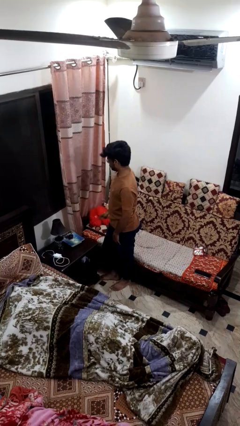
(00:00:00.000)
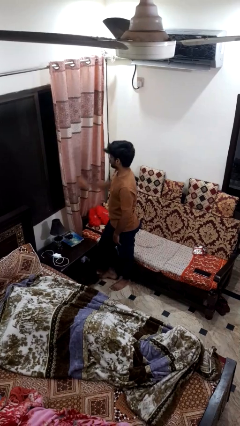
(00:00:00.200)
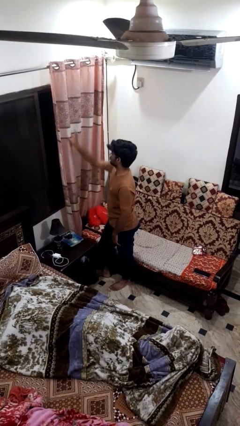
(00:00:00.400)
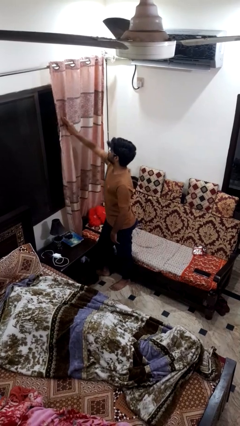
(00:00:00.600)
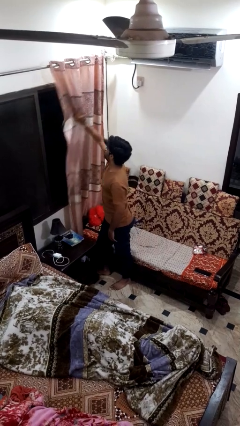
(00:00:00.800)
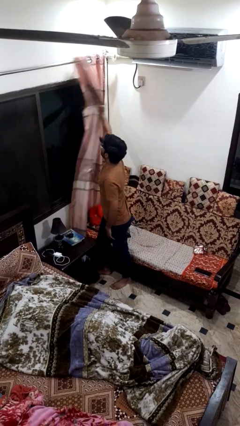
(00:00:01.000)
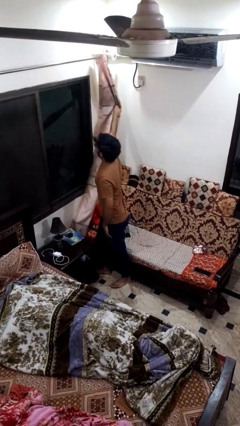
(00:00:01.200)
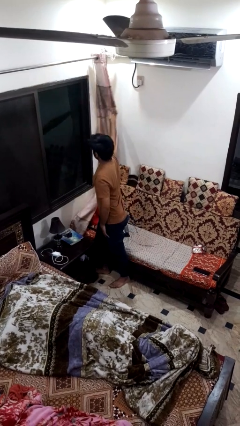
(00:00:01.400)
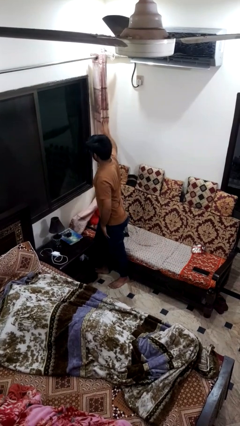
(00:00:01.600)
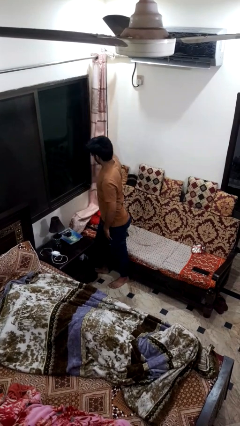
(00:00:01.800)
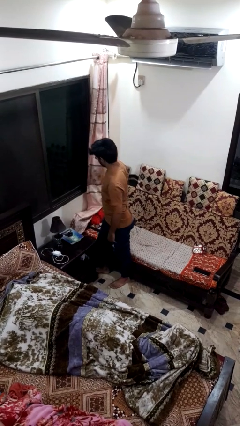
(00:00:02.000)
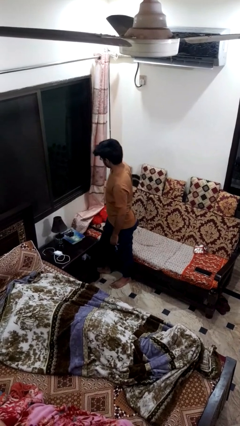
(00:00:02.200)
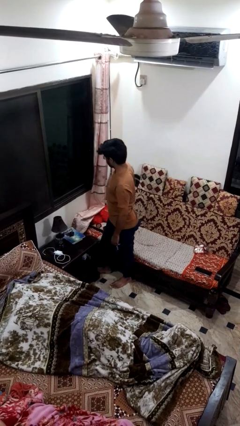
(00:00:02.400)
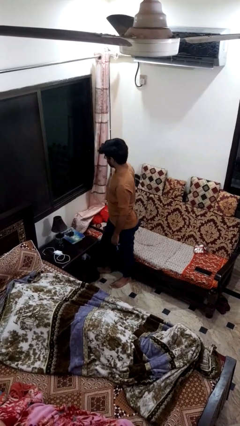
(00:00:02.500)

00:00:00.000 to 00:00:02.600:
person opens curtains

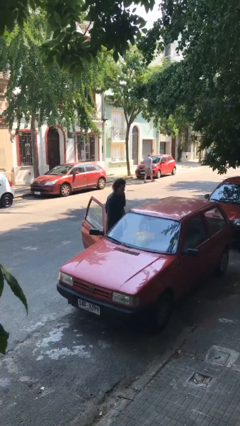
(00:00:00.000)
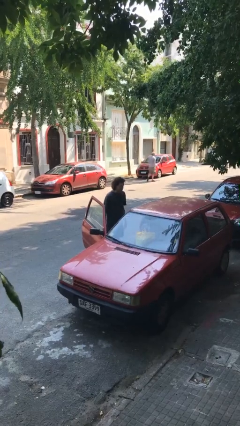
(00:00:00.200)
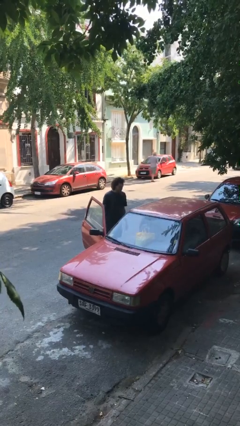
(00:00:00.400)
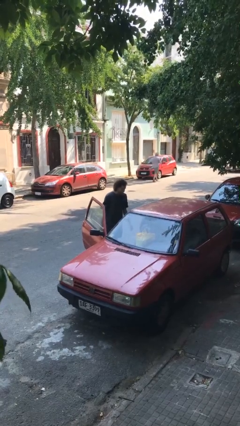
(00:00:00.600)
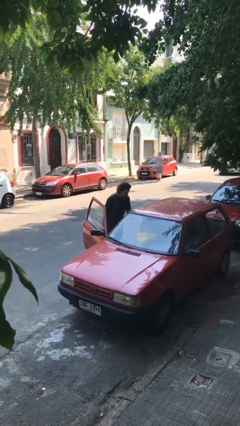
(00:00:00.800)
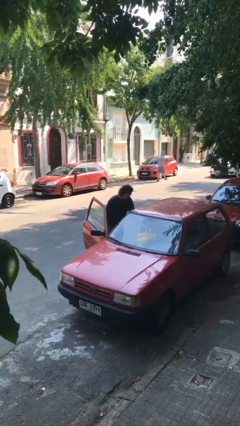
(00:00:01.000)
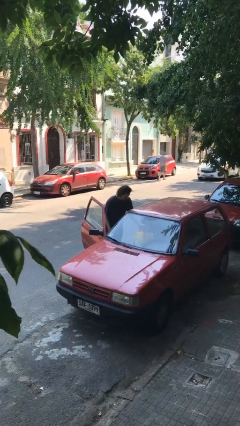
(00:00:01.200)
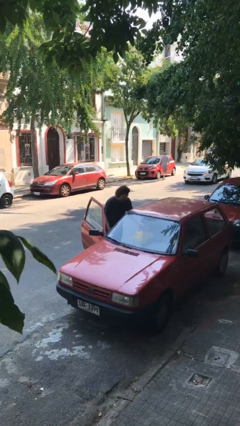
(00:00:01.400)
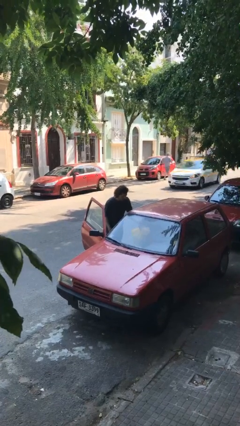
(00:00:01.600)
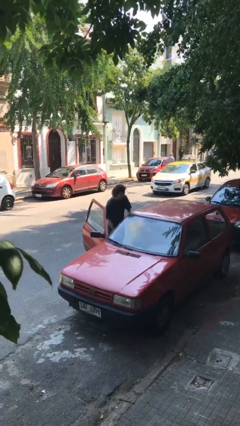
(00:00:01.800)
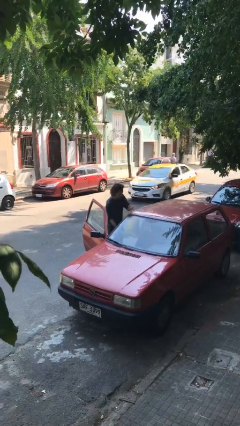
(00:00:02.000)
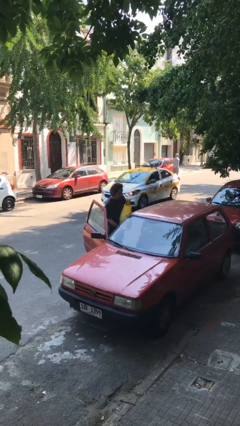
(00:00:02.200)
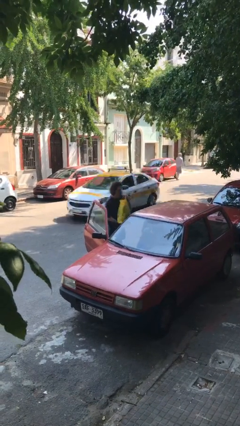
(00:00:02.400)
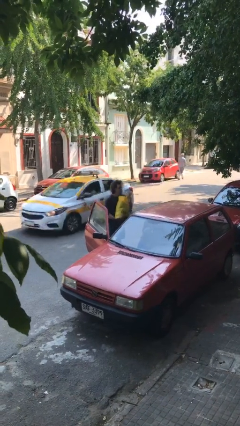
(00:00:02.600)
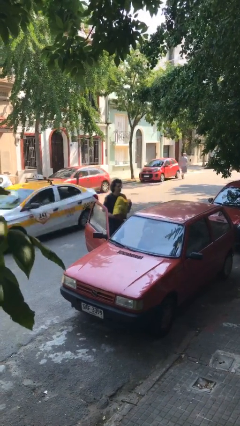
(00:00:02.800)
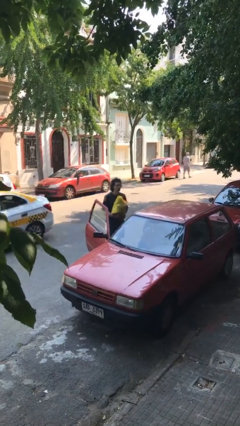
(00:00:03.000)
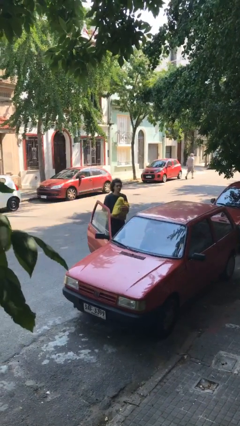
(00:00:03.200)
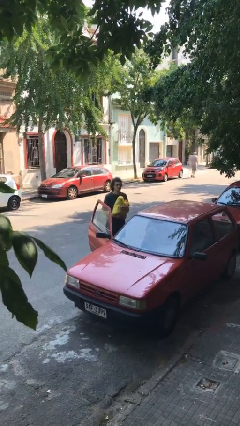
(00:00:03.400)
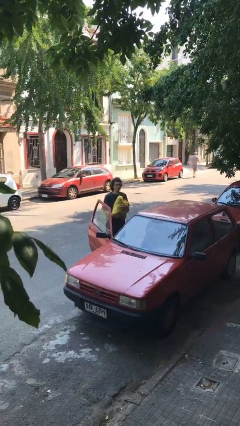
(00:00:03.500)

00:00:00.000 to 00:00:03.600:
person unloads car

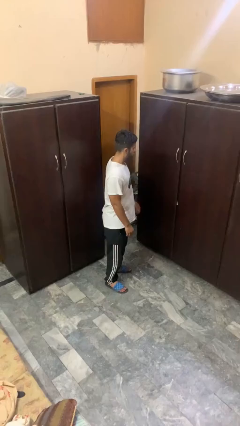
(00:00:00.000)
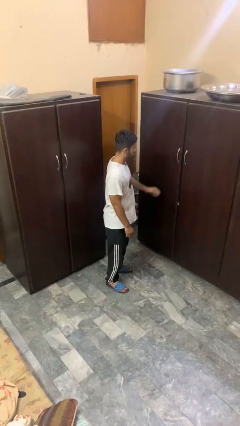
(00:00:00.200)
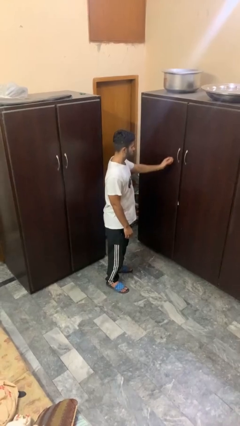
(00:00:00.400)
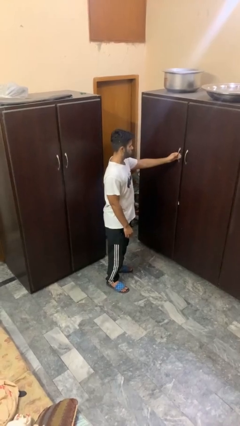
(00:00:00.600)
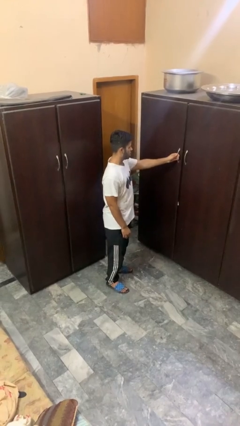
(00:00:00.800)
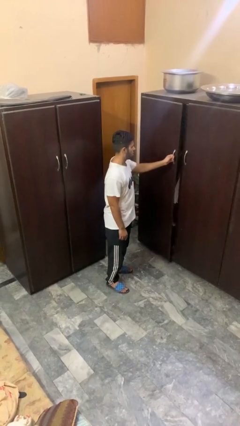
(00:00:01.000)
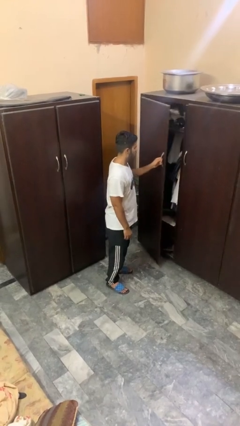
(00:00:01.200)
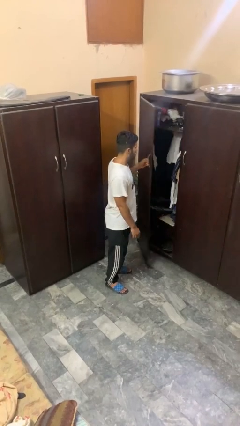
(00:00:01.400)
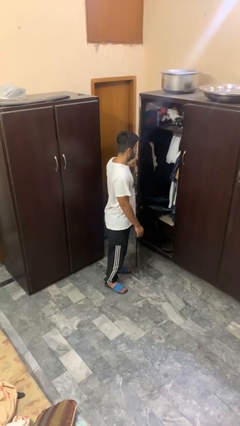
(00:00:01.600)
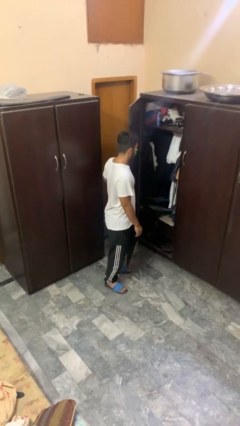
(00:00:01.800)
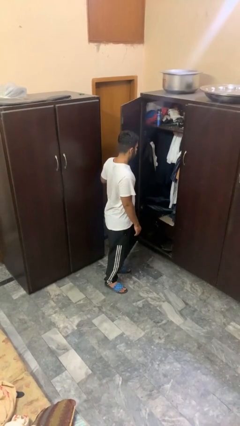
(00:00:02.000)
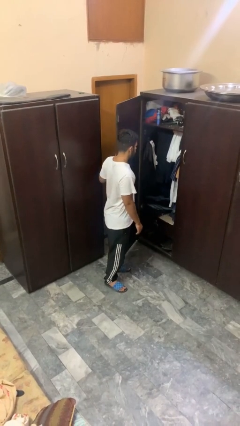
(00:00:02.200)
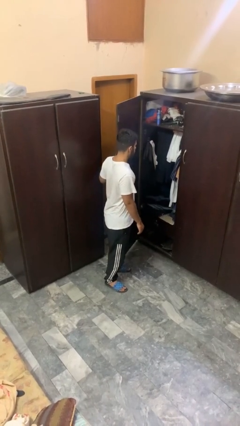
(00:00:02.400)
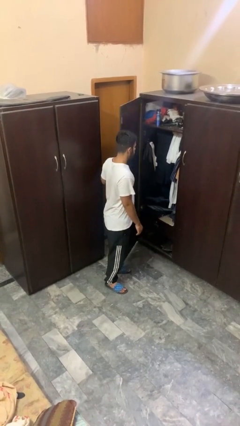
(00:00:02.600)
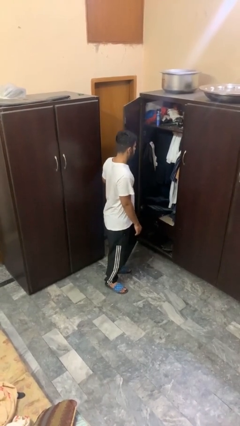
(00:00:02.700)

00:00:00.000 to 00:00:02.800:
person opens closet door

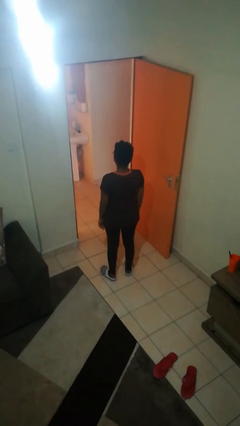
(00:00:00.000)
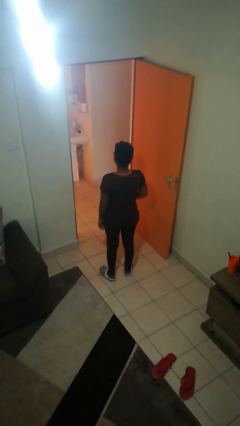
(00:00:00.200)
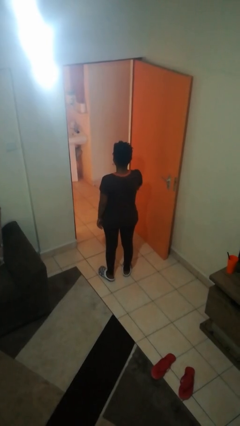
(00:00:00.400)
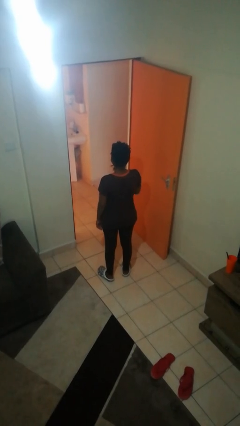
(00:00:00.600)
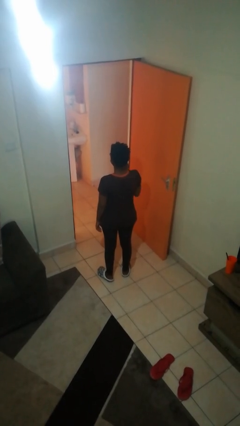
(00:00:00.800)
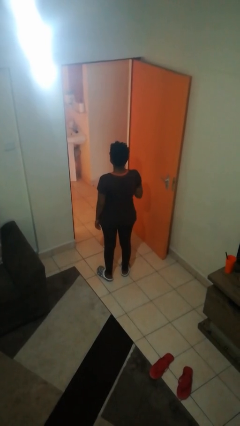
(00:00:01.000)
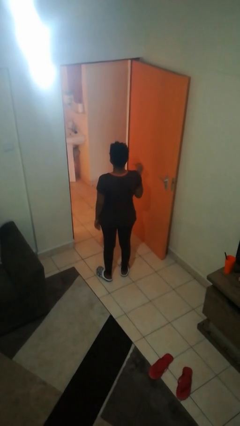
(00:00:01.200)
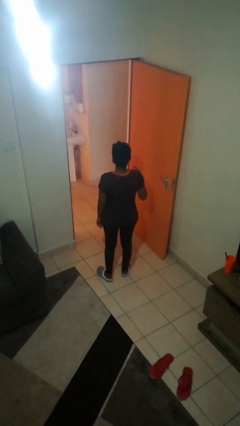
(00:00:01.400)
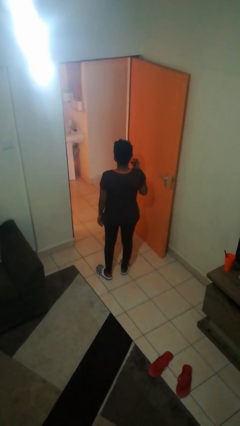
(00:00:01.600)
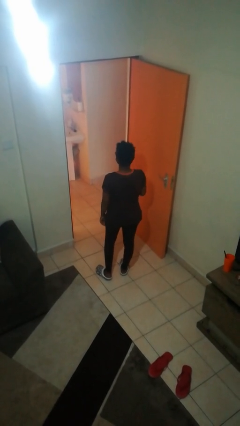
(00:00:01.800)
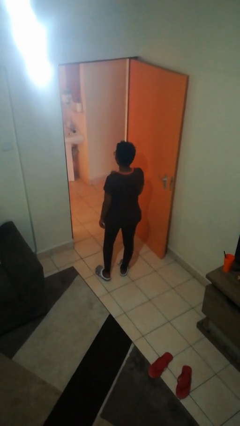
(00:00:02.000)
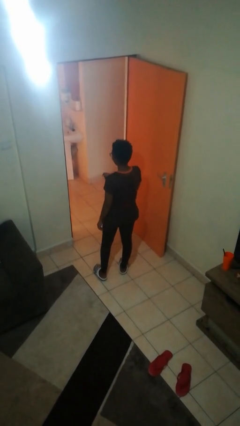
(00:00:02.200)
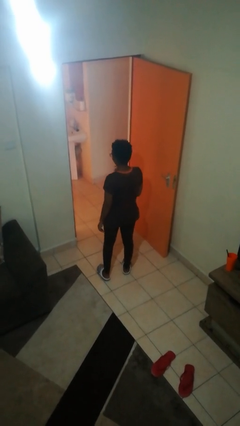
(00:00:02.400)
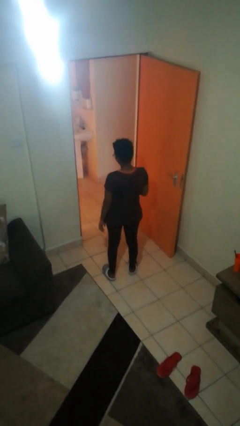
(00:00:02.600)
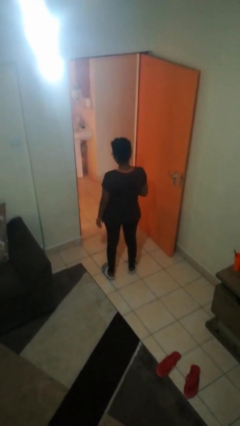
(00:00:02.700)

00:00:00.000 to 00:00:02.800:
person snaps fingers

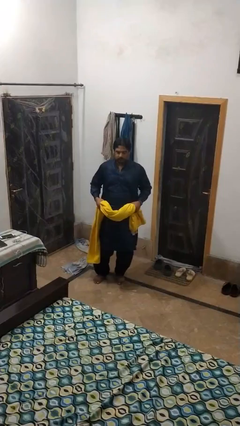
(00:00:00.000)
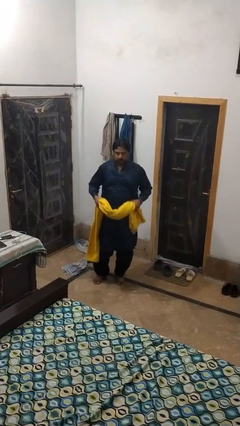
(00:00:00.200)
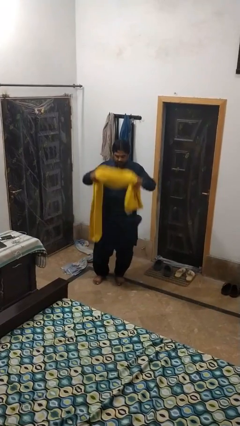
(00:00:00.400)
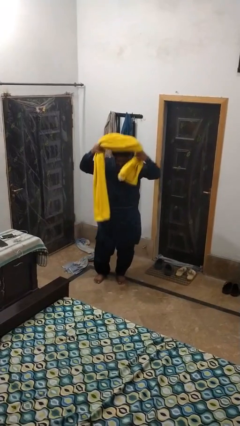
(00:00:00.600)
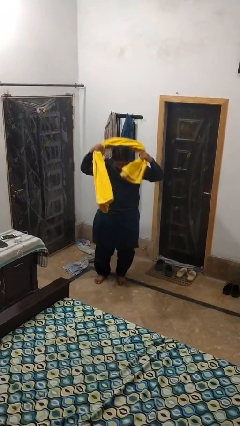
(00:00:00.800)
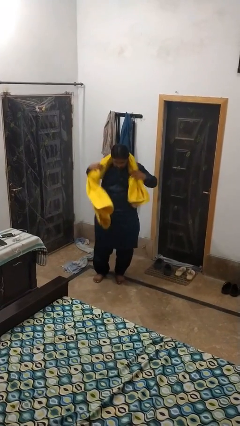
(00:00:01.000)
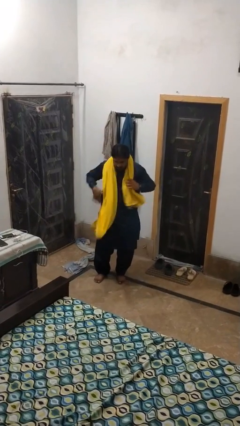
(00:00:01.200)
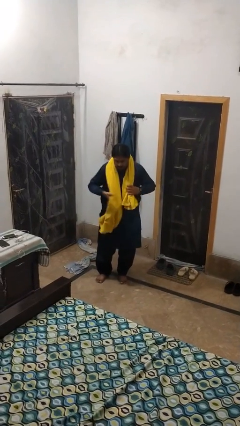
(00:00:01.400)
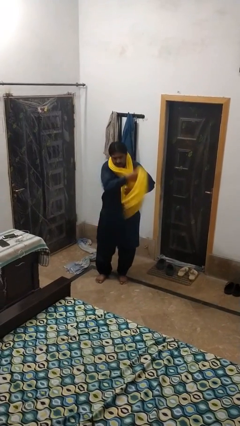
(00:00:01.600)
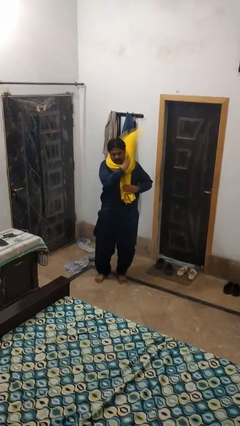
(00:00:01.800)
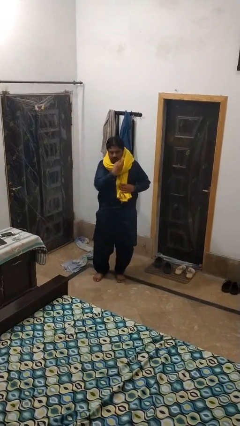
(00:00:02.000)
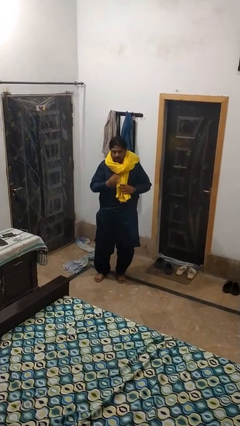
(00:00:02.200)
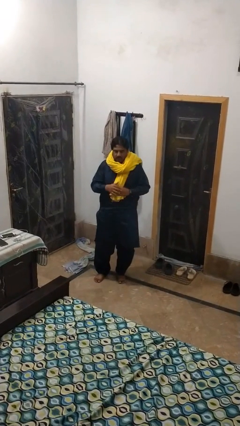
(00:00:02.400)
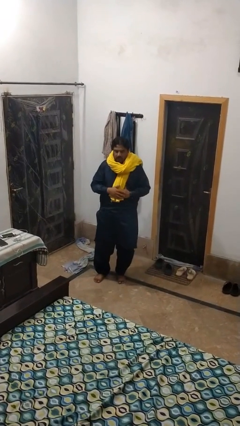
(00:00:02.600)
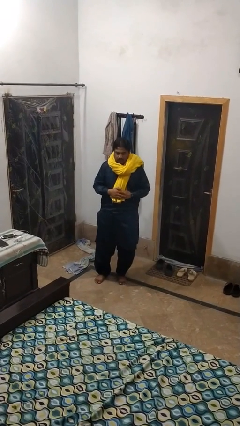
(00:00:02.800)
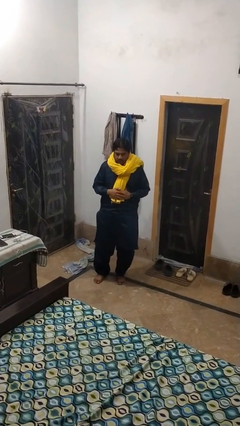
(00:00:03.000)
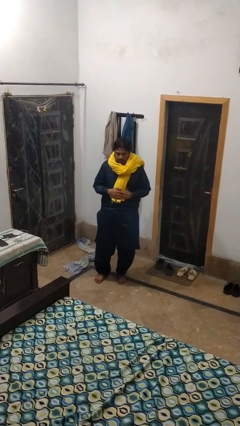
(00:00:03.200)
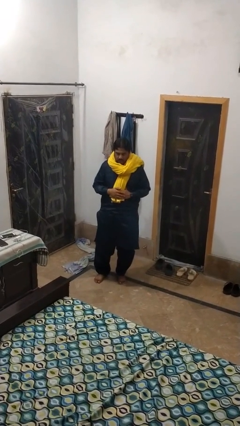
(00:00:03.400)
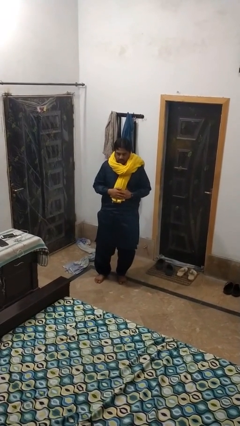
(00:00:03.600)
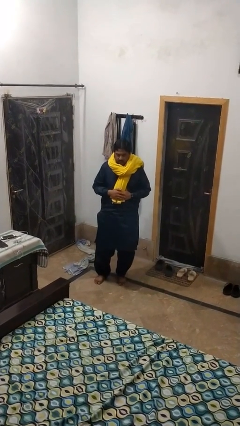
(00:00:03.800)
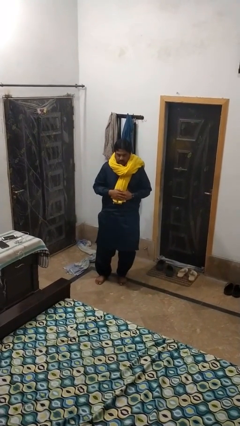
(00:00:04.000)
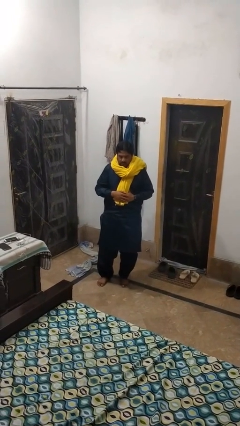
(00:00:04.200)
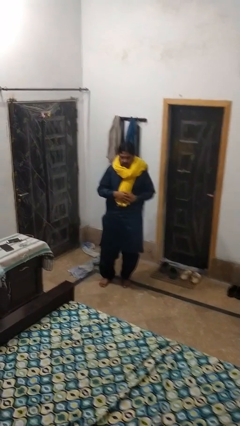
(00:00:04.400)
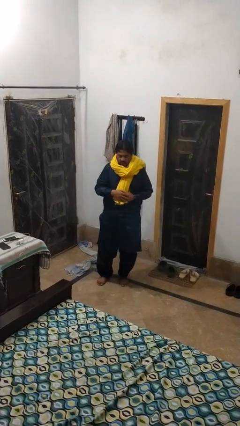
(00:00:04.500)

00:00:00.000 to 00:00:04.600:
person puts on scarf

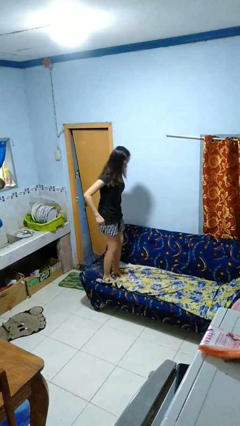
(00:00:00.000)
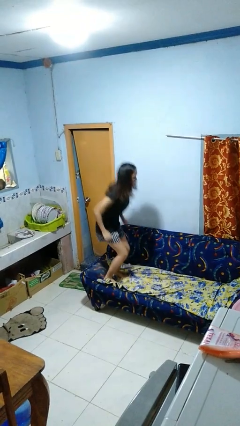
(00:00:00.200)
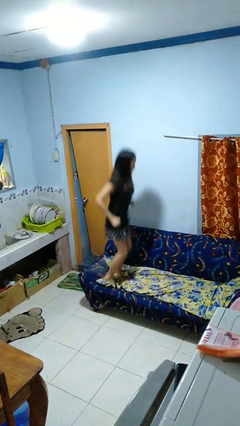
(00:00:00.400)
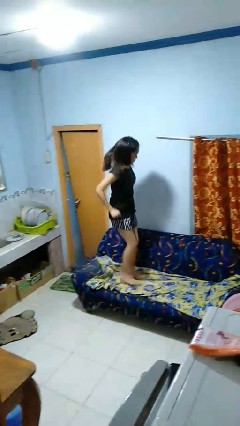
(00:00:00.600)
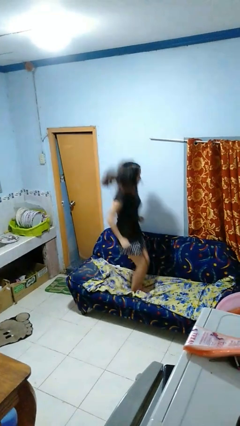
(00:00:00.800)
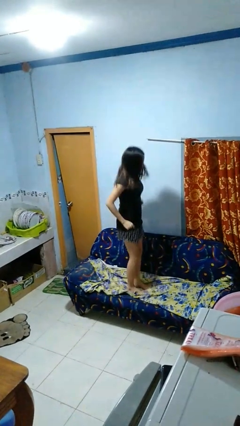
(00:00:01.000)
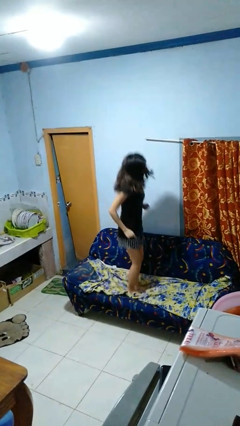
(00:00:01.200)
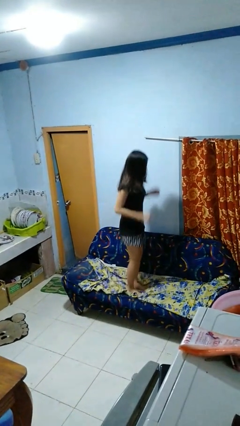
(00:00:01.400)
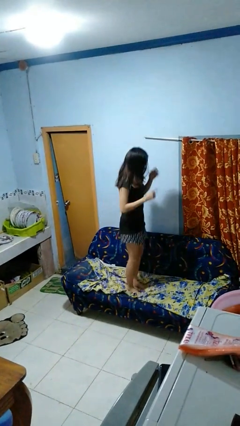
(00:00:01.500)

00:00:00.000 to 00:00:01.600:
person jumps on couch
